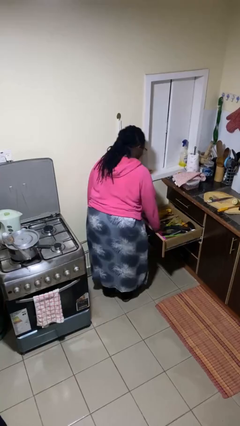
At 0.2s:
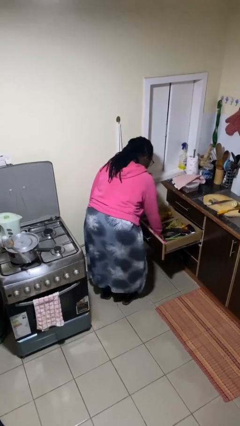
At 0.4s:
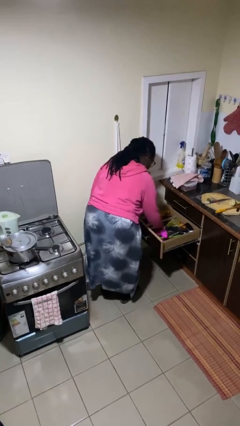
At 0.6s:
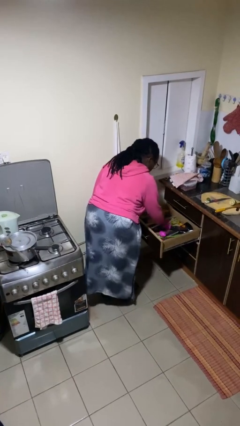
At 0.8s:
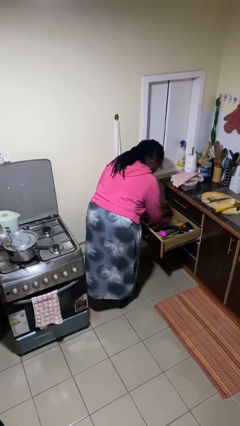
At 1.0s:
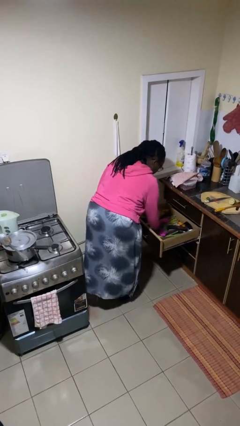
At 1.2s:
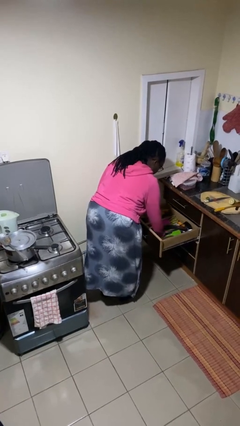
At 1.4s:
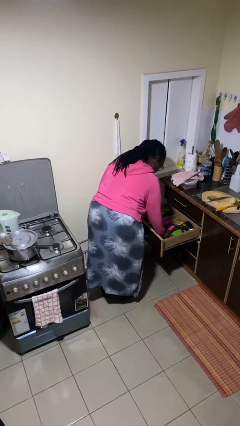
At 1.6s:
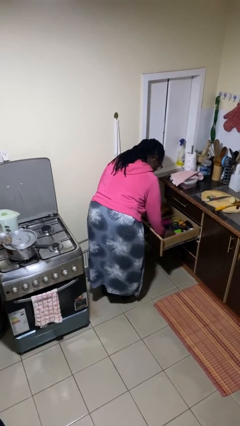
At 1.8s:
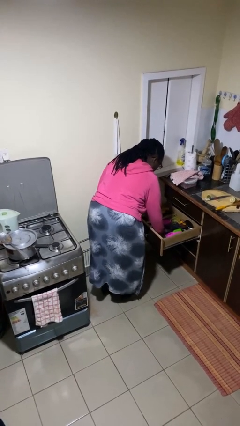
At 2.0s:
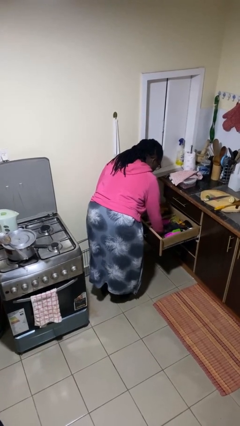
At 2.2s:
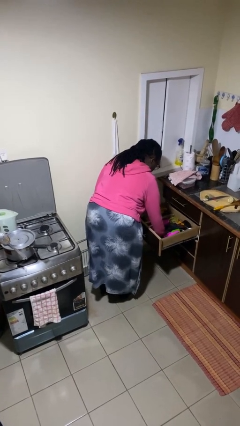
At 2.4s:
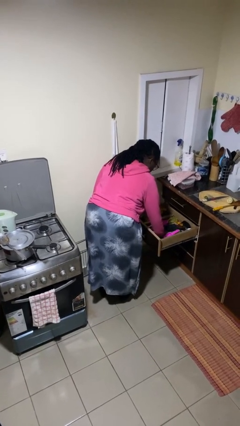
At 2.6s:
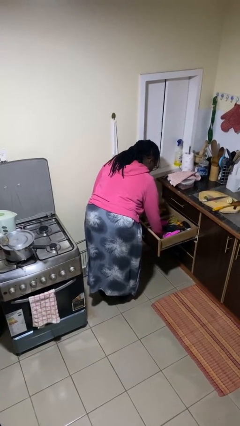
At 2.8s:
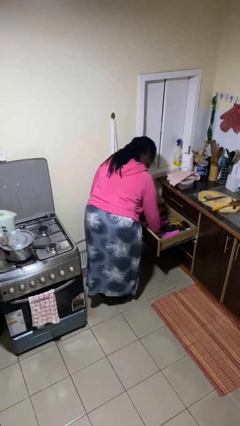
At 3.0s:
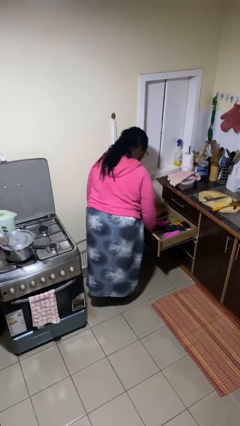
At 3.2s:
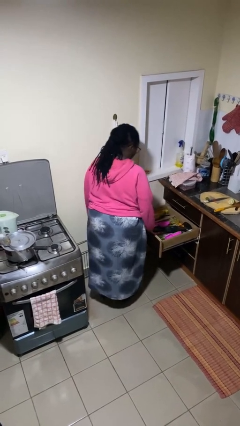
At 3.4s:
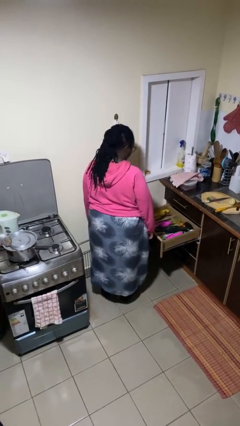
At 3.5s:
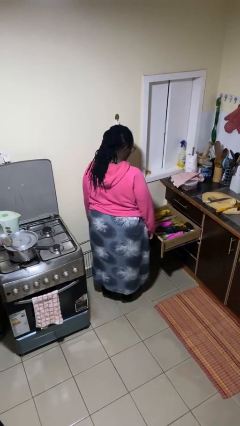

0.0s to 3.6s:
person searches in kitchen drawer

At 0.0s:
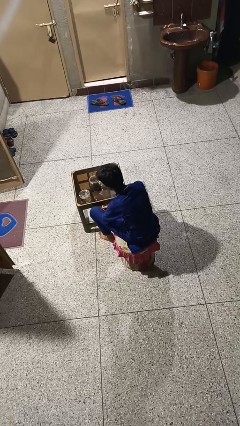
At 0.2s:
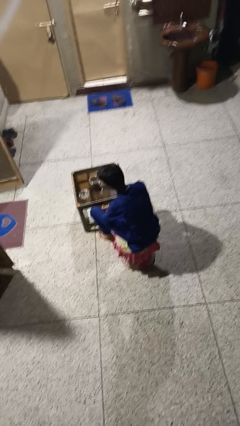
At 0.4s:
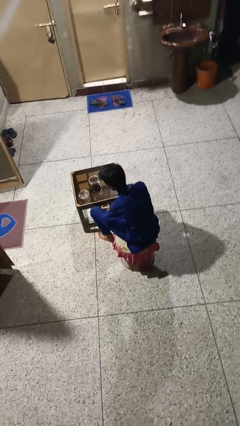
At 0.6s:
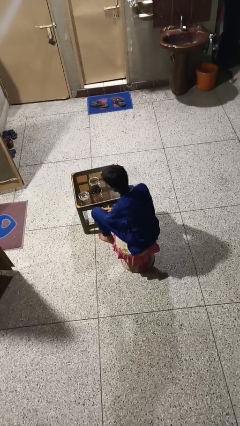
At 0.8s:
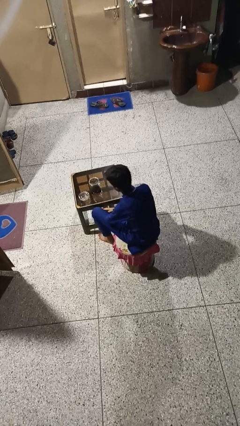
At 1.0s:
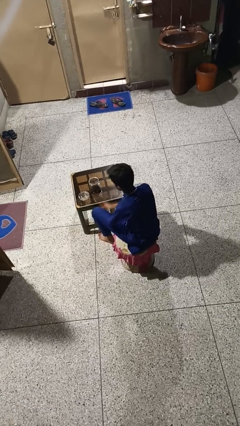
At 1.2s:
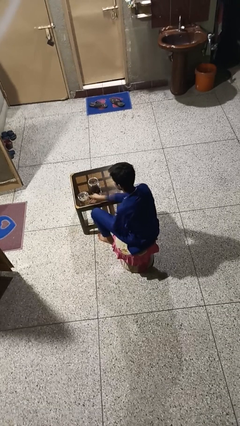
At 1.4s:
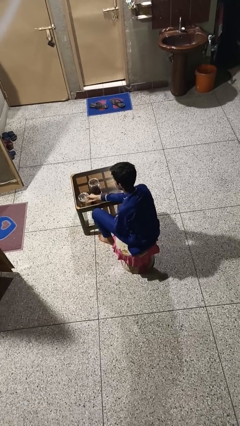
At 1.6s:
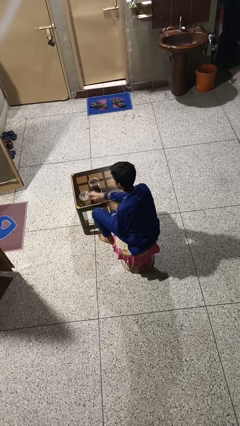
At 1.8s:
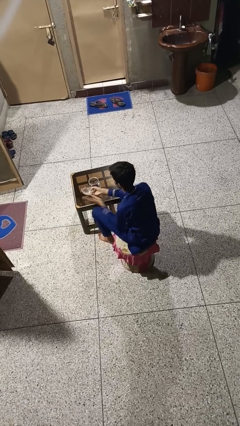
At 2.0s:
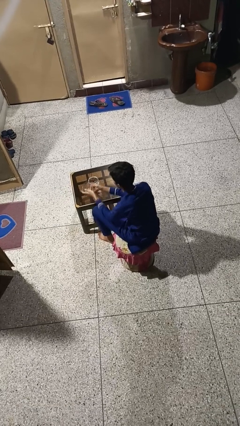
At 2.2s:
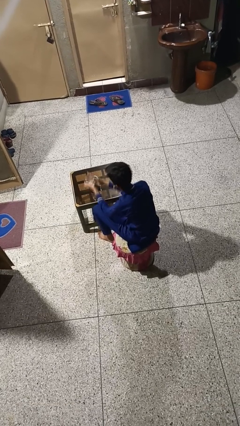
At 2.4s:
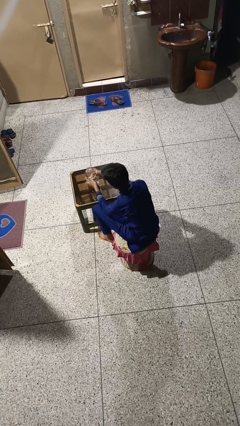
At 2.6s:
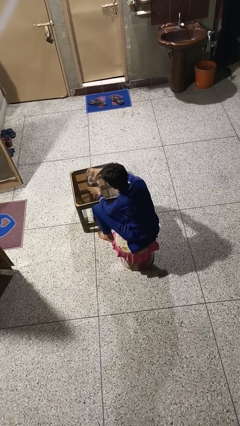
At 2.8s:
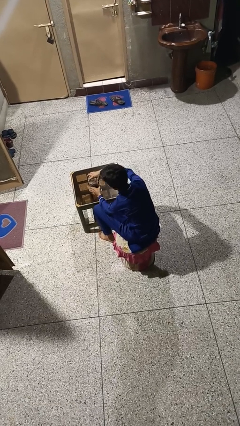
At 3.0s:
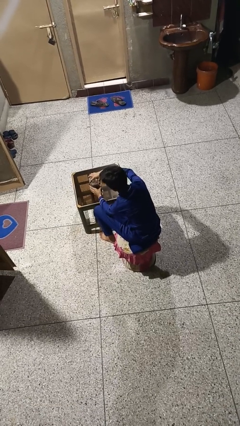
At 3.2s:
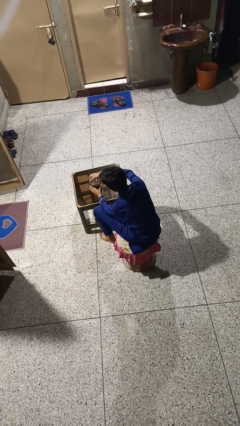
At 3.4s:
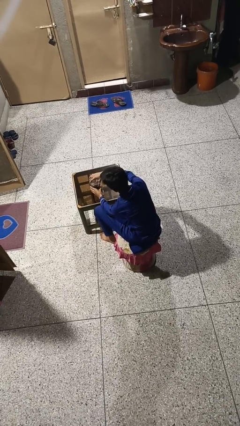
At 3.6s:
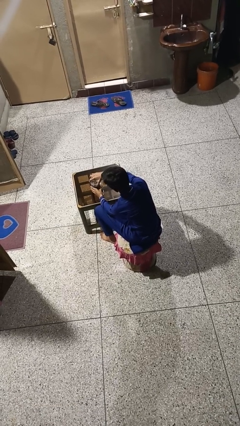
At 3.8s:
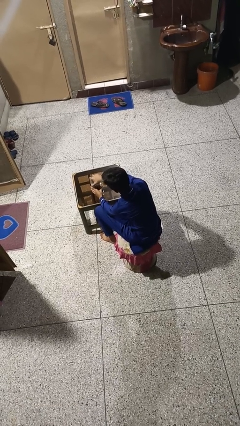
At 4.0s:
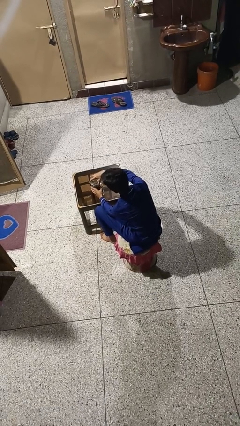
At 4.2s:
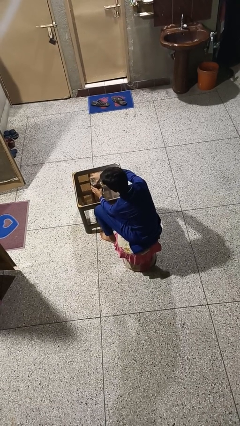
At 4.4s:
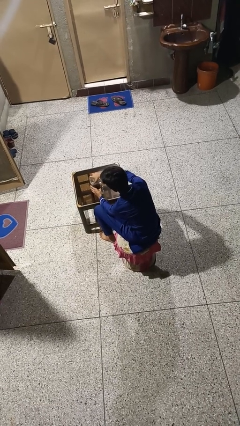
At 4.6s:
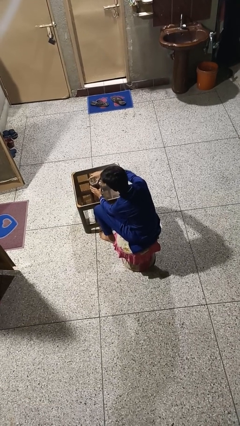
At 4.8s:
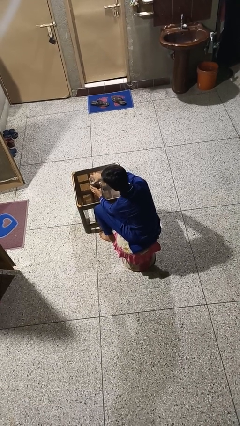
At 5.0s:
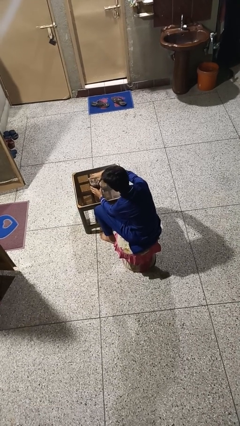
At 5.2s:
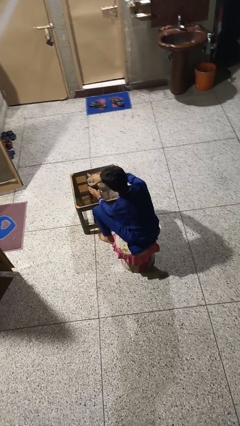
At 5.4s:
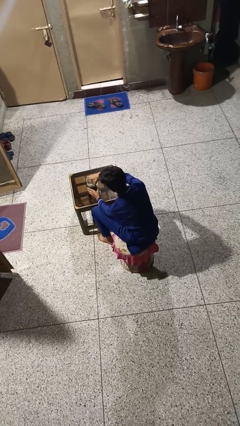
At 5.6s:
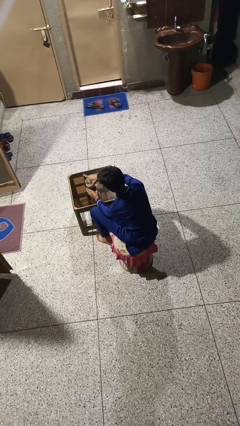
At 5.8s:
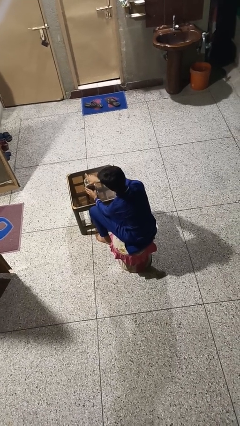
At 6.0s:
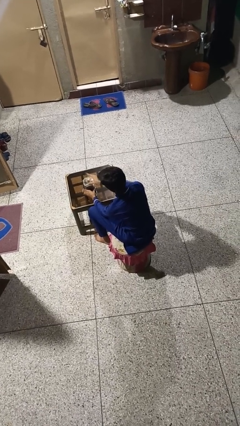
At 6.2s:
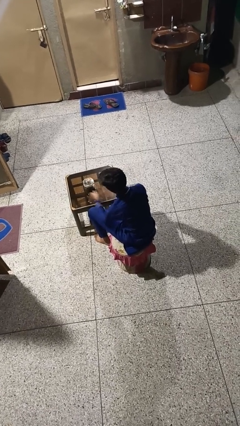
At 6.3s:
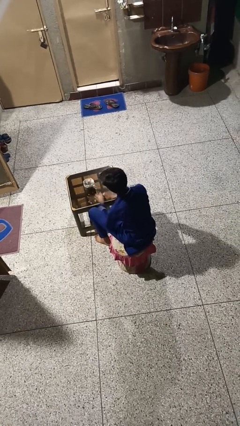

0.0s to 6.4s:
person closes jar

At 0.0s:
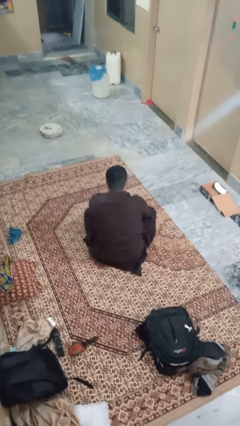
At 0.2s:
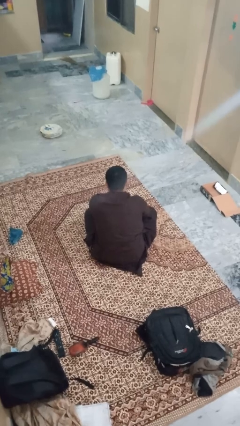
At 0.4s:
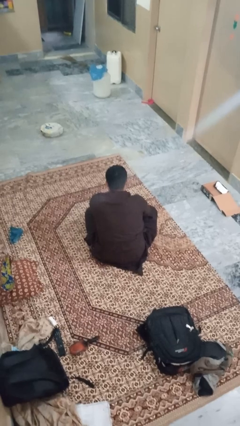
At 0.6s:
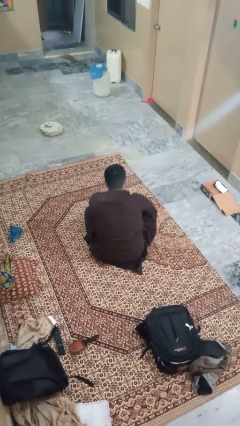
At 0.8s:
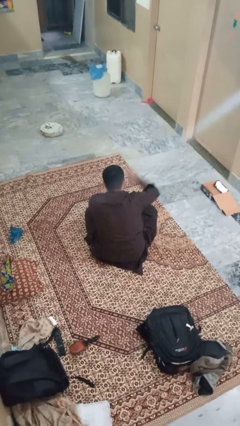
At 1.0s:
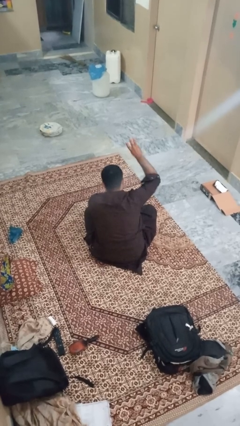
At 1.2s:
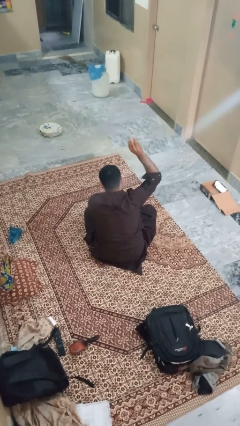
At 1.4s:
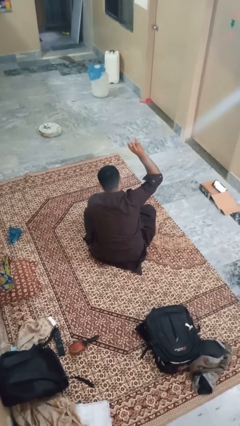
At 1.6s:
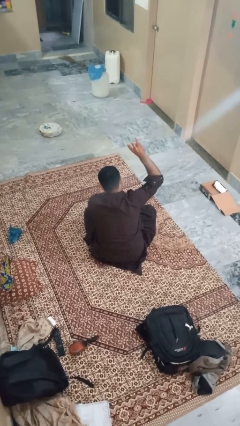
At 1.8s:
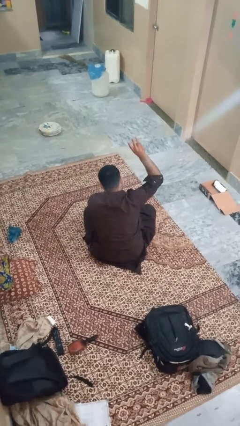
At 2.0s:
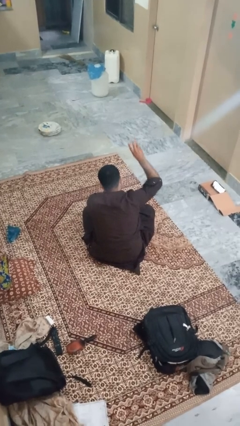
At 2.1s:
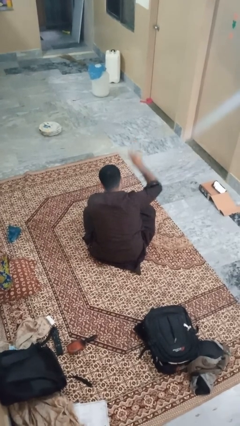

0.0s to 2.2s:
person gestures number three

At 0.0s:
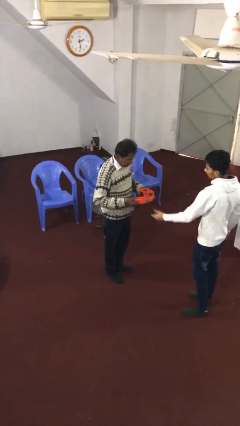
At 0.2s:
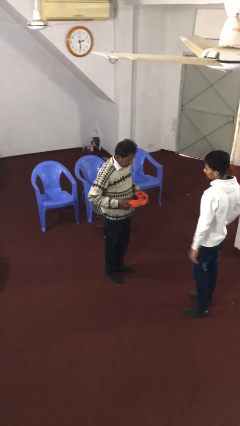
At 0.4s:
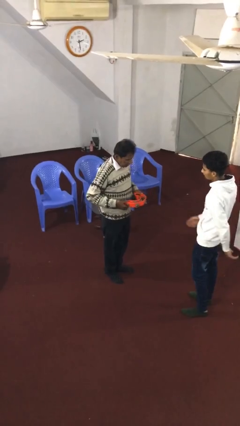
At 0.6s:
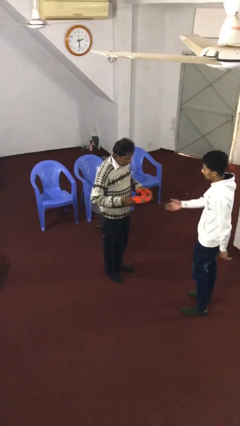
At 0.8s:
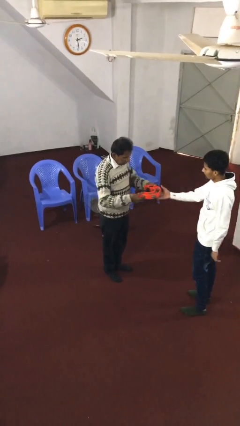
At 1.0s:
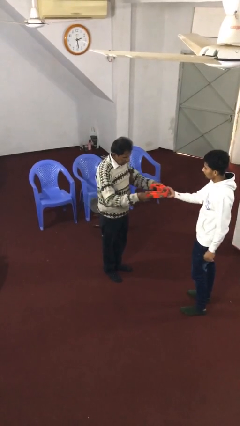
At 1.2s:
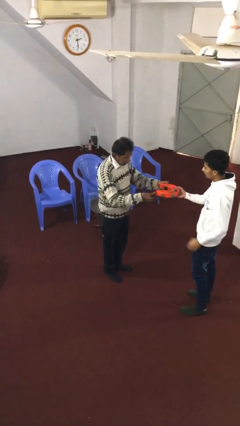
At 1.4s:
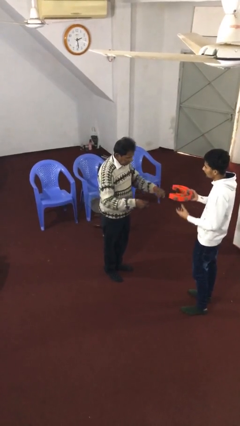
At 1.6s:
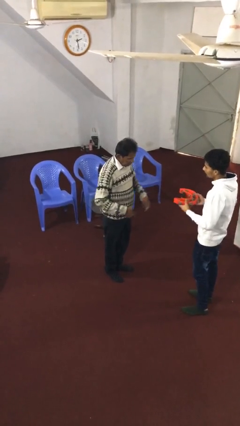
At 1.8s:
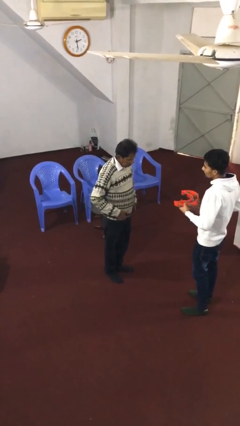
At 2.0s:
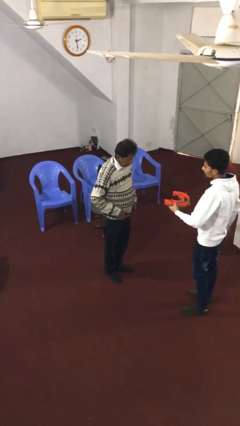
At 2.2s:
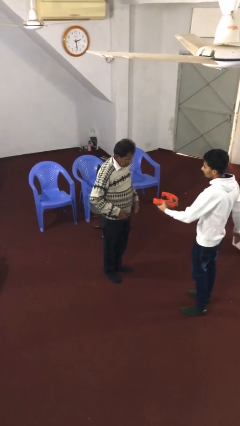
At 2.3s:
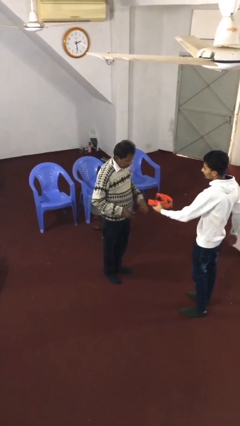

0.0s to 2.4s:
person transfers object to person

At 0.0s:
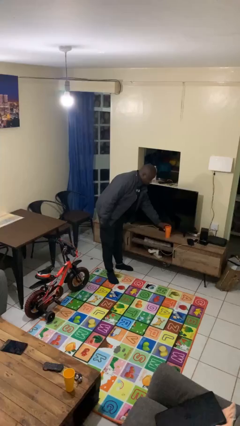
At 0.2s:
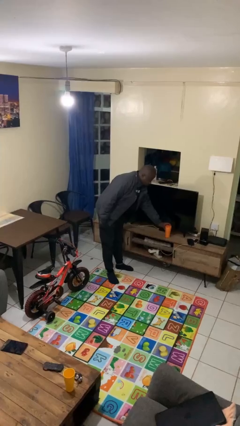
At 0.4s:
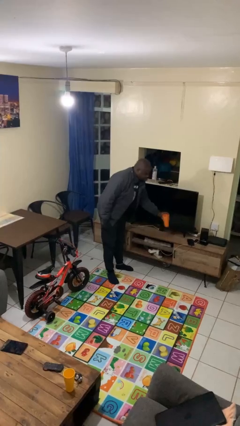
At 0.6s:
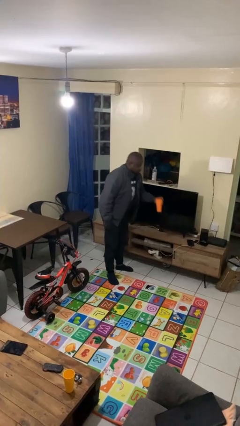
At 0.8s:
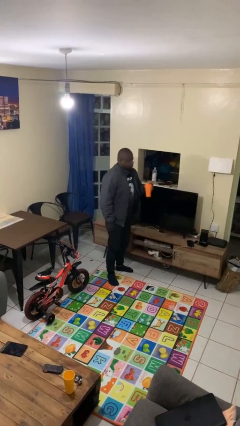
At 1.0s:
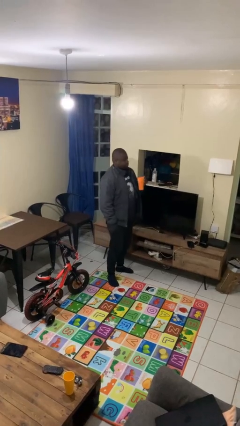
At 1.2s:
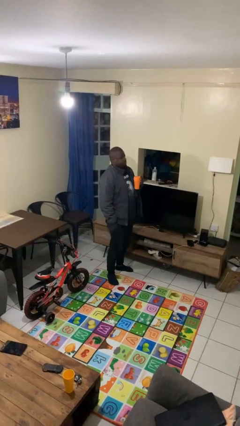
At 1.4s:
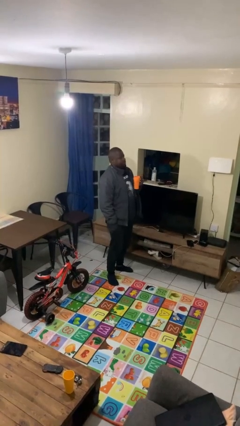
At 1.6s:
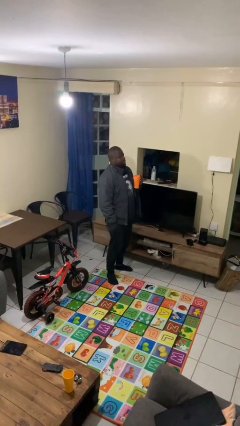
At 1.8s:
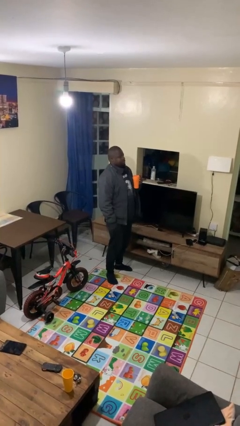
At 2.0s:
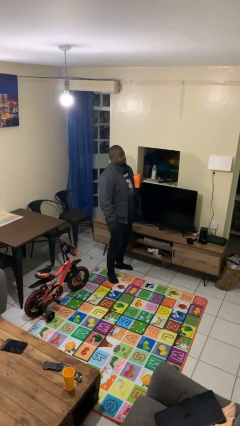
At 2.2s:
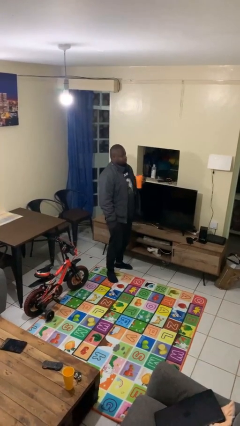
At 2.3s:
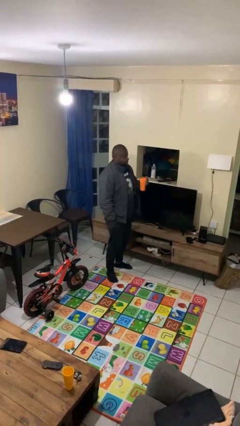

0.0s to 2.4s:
person picks up object from countertop

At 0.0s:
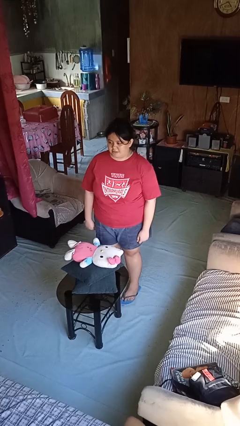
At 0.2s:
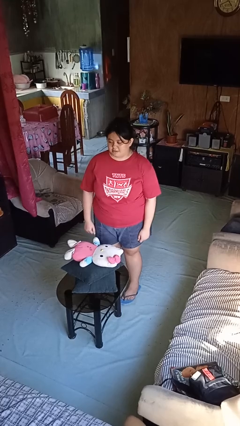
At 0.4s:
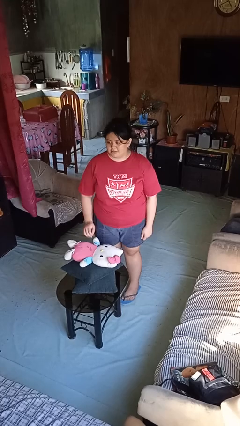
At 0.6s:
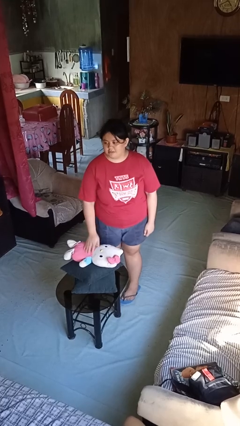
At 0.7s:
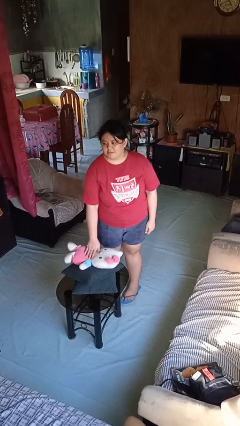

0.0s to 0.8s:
person taps object with finger
